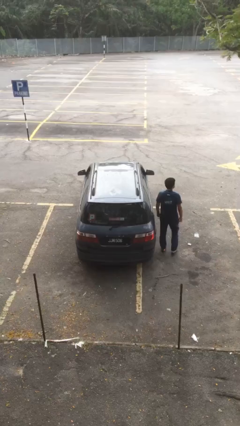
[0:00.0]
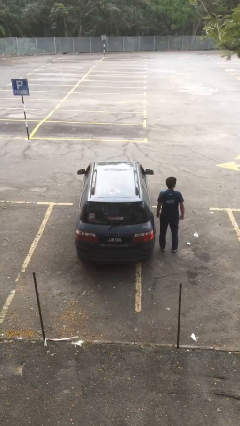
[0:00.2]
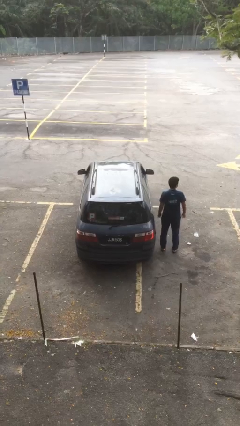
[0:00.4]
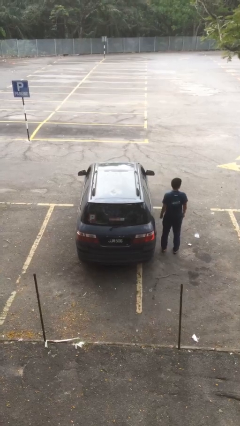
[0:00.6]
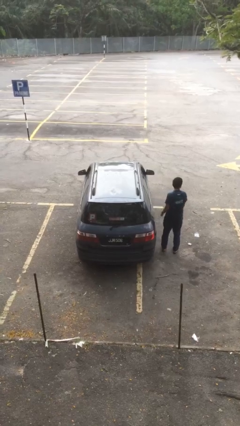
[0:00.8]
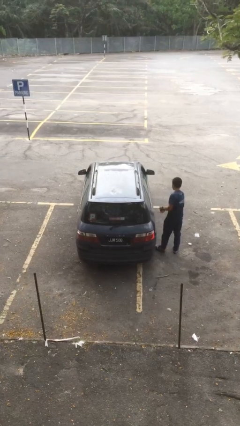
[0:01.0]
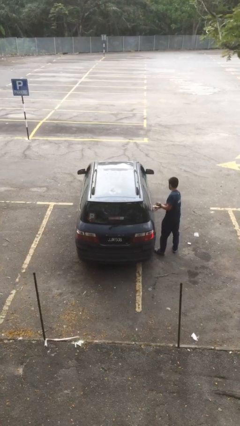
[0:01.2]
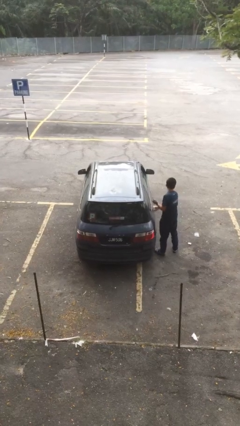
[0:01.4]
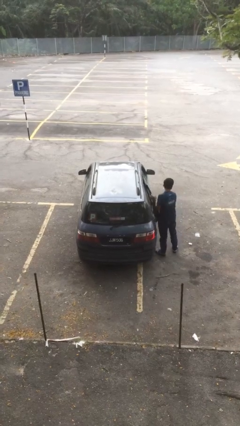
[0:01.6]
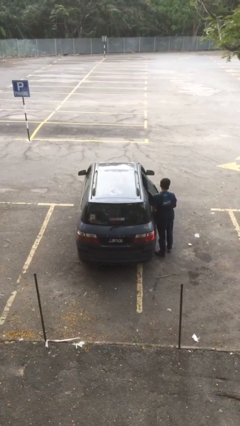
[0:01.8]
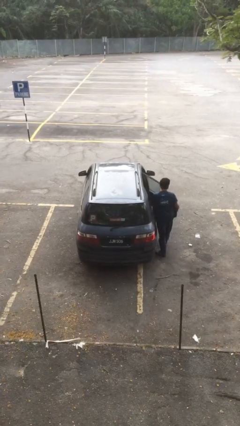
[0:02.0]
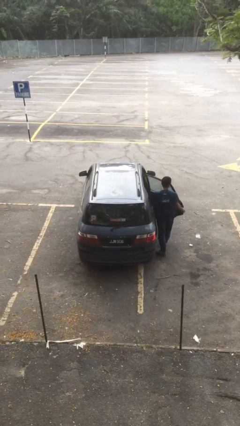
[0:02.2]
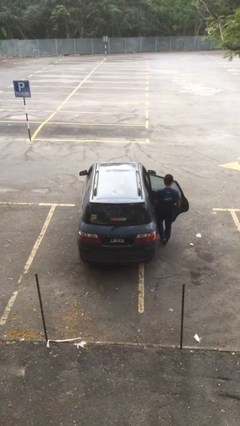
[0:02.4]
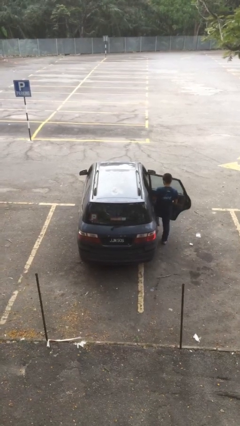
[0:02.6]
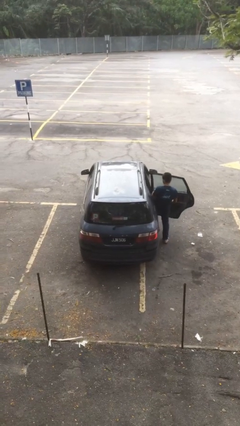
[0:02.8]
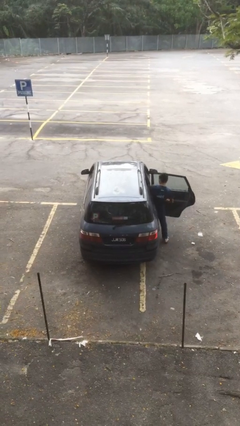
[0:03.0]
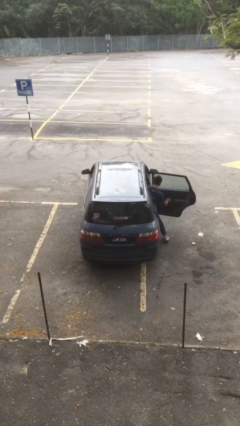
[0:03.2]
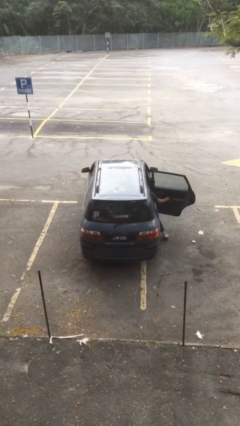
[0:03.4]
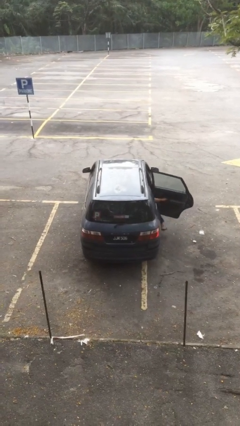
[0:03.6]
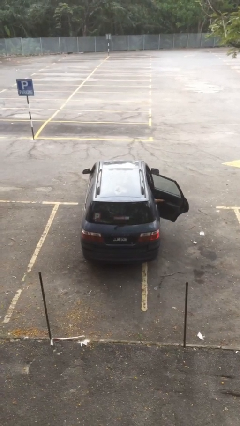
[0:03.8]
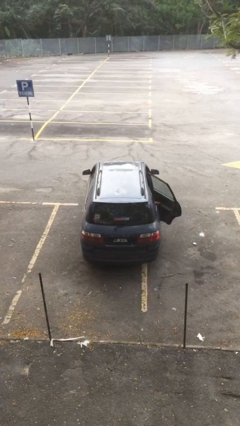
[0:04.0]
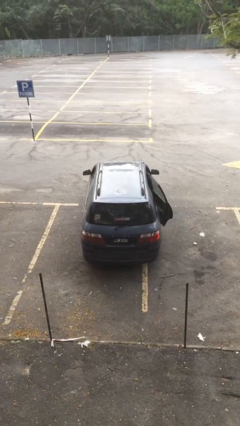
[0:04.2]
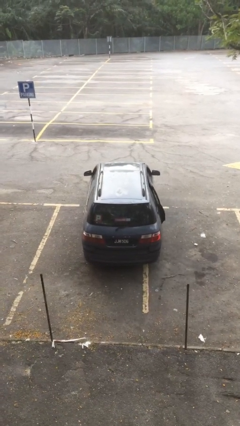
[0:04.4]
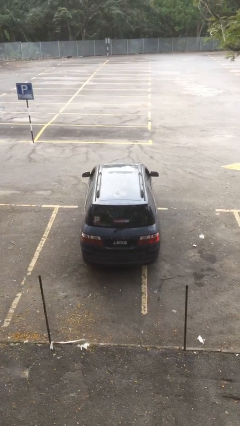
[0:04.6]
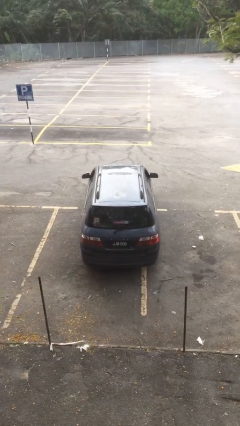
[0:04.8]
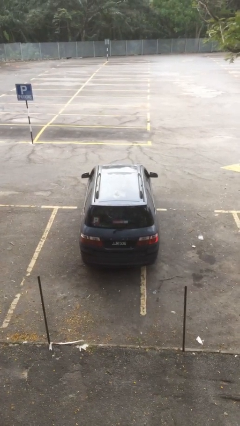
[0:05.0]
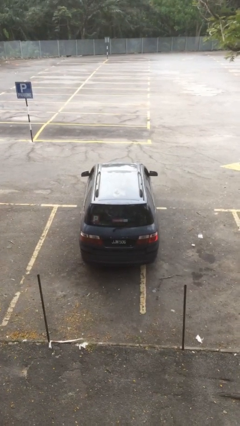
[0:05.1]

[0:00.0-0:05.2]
car picks up person

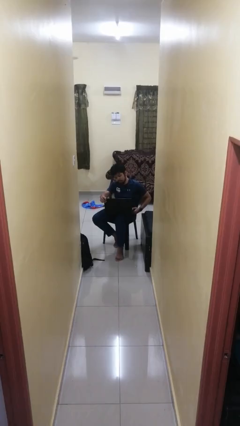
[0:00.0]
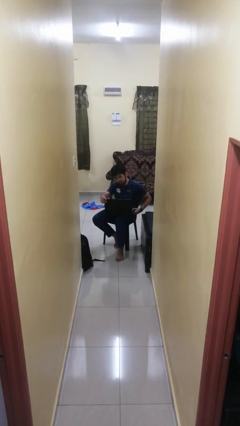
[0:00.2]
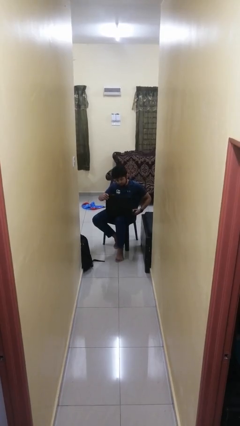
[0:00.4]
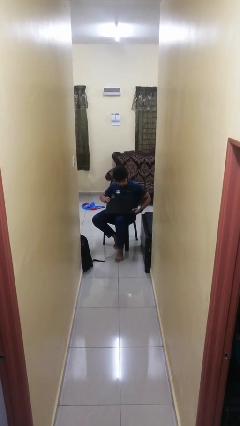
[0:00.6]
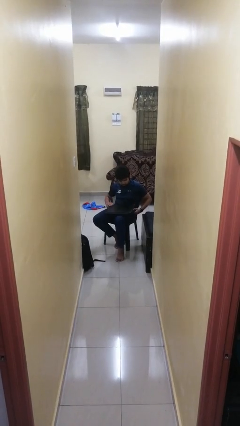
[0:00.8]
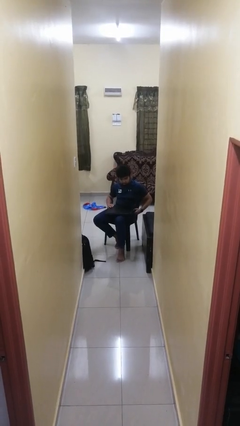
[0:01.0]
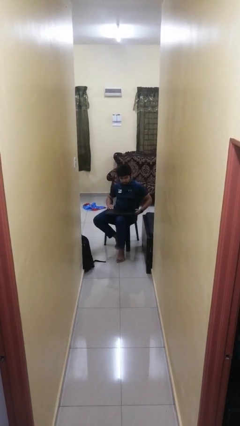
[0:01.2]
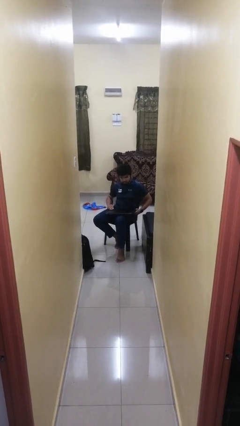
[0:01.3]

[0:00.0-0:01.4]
person closes laptop

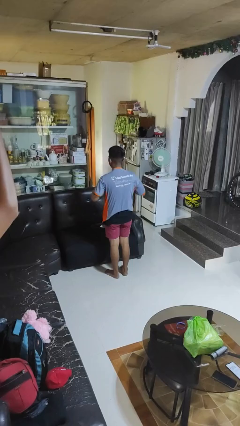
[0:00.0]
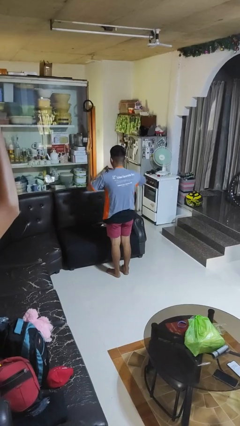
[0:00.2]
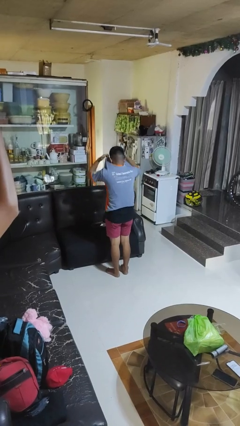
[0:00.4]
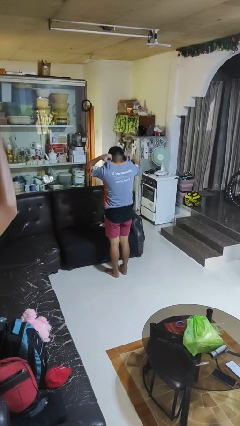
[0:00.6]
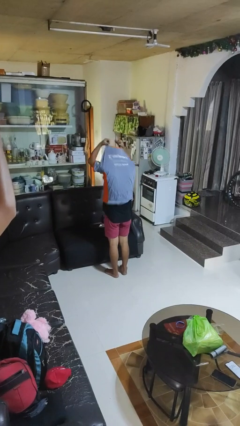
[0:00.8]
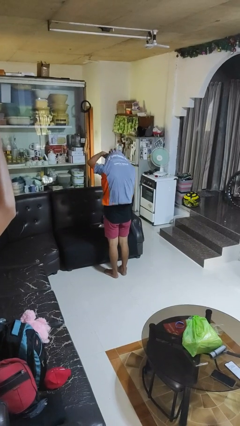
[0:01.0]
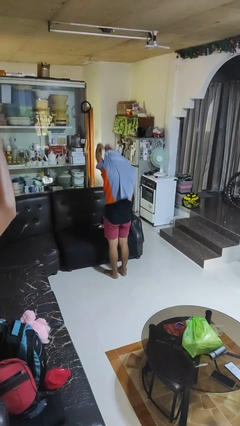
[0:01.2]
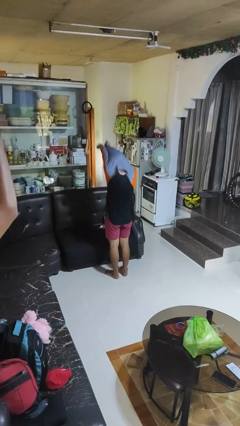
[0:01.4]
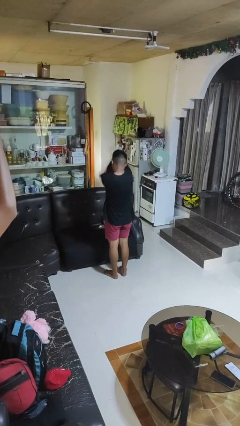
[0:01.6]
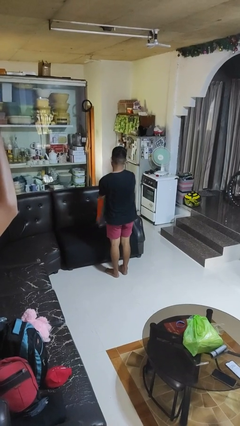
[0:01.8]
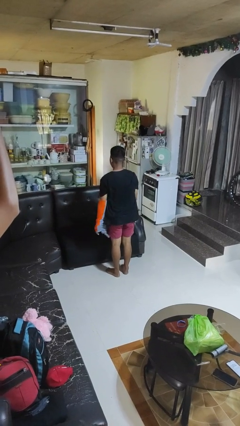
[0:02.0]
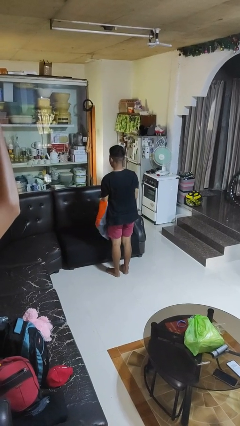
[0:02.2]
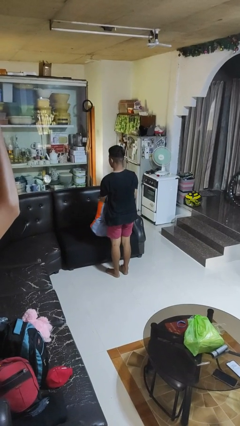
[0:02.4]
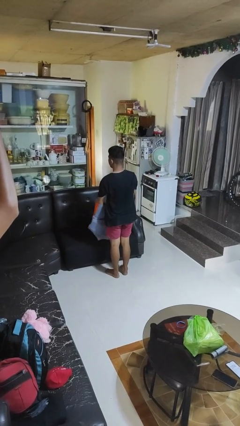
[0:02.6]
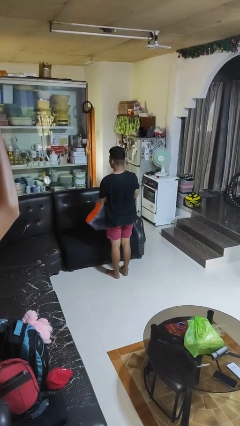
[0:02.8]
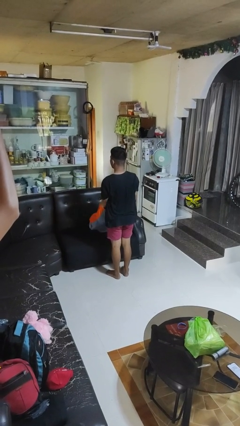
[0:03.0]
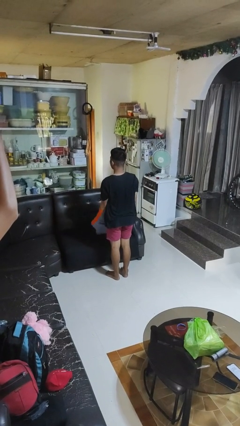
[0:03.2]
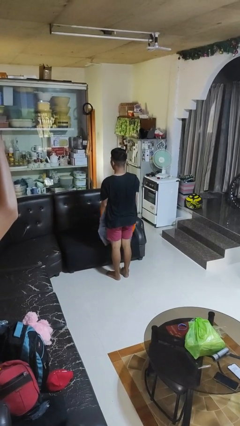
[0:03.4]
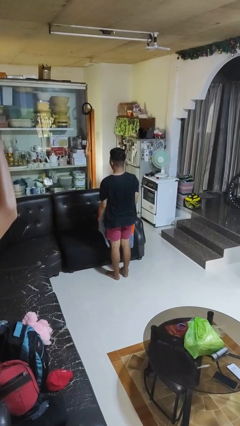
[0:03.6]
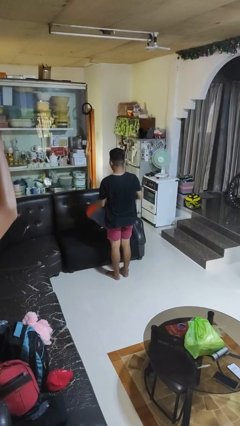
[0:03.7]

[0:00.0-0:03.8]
person takes off shirt

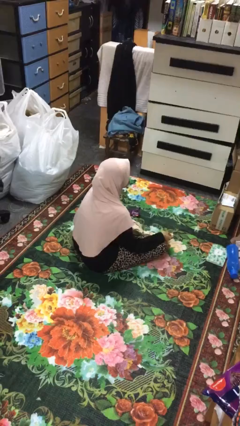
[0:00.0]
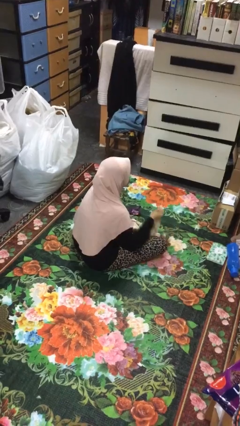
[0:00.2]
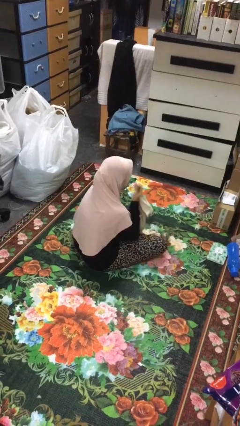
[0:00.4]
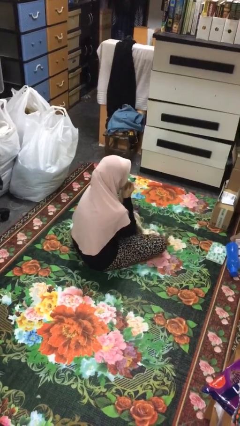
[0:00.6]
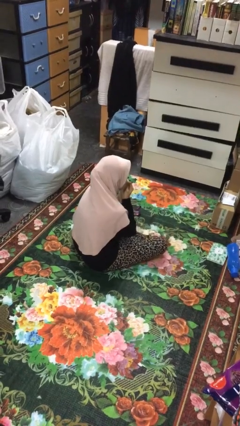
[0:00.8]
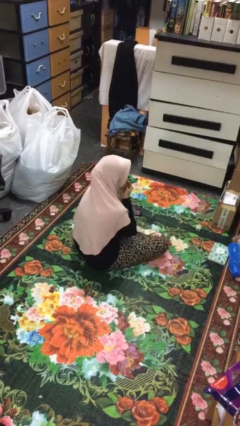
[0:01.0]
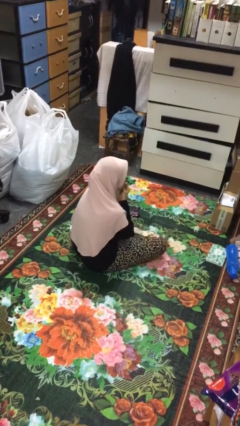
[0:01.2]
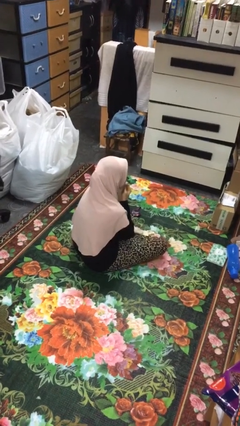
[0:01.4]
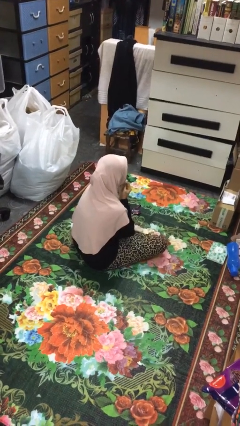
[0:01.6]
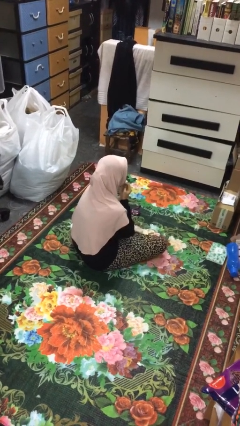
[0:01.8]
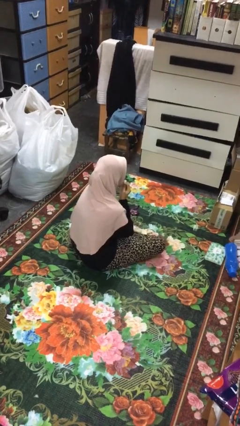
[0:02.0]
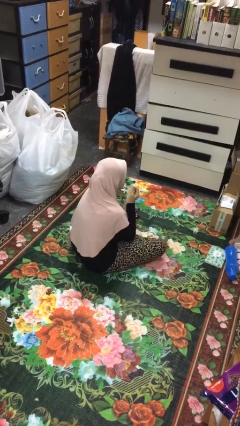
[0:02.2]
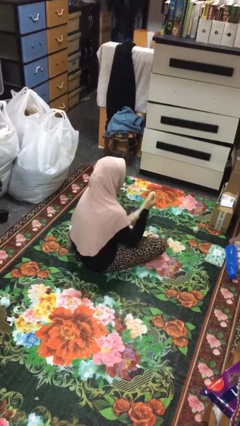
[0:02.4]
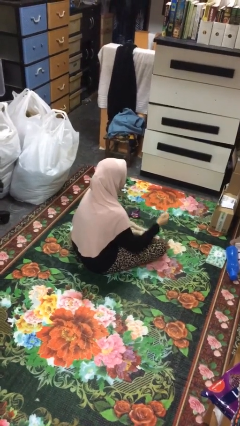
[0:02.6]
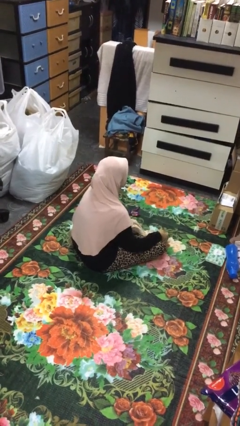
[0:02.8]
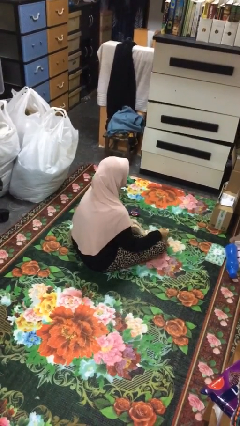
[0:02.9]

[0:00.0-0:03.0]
person wipes mouth with napkin

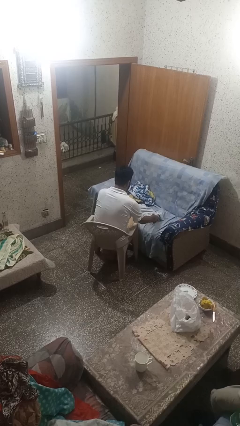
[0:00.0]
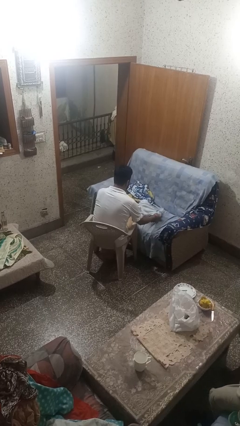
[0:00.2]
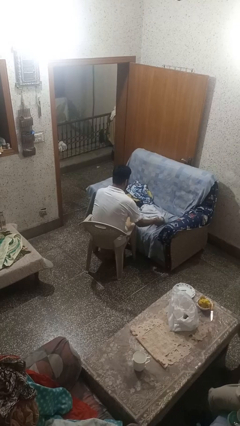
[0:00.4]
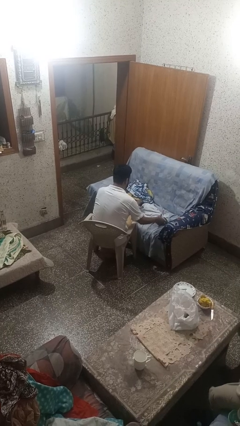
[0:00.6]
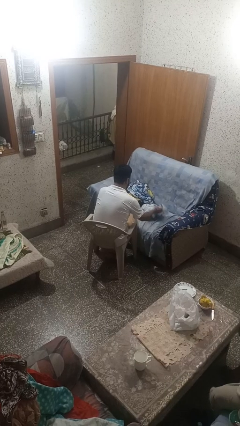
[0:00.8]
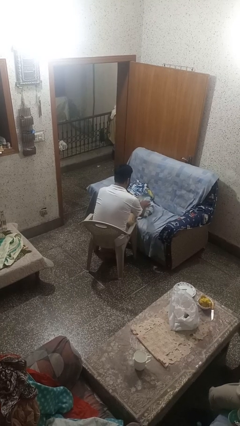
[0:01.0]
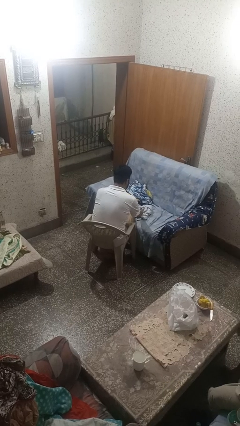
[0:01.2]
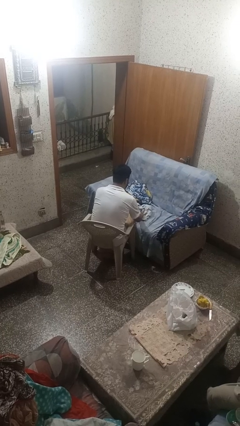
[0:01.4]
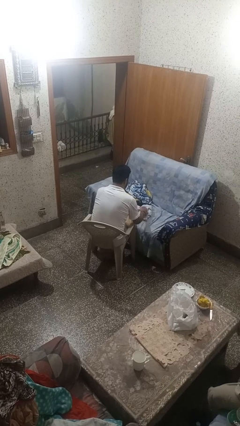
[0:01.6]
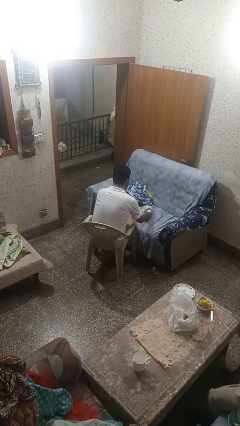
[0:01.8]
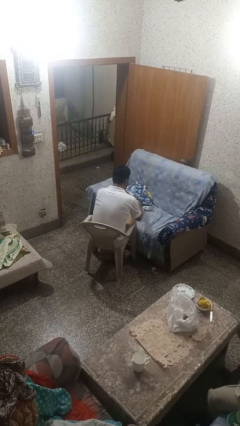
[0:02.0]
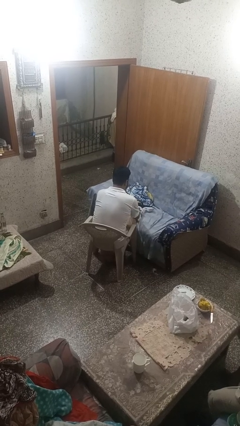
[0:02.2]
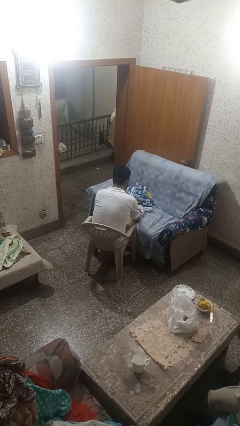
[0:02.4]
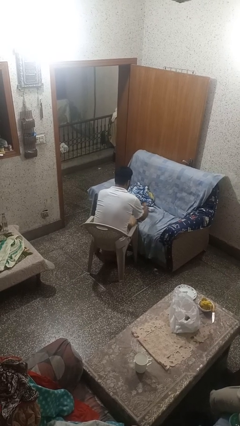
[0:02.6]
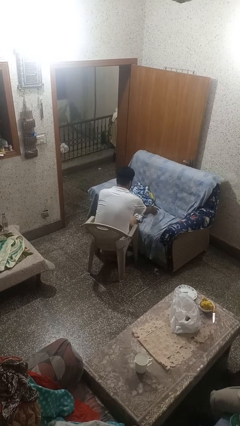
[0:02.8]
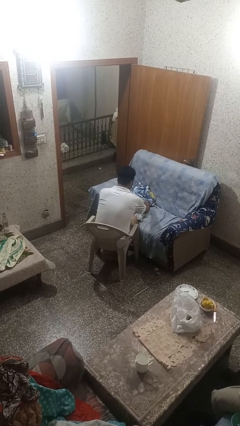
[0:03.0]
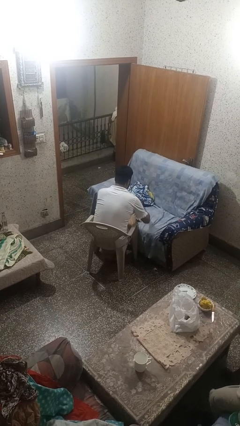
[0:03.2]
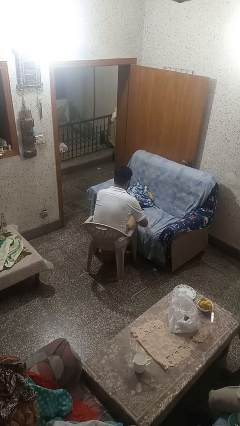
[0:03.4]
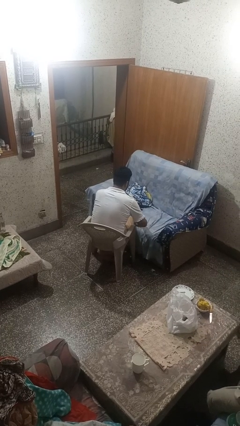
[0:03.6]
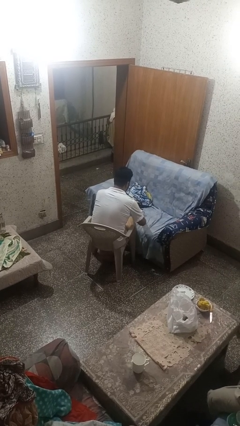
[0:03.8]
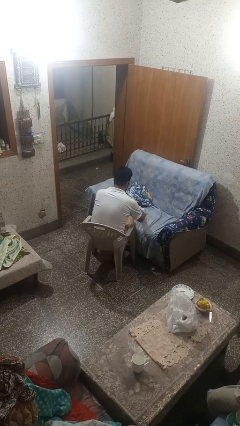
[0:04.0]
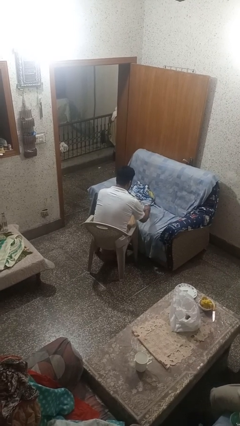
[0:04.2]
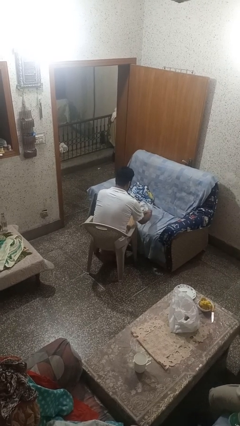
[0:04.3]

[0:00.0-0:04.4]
person folds shirt
